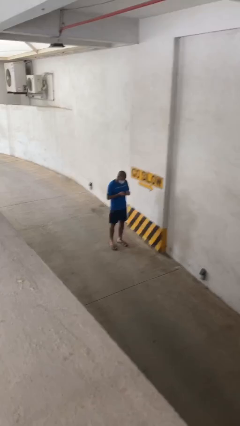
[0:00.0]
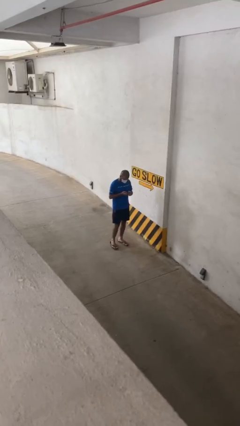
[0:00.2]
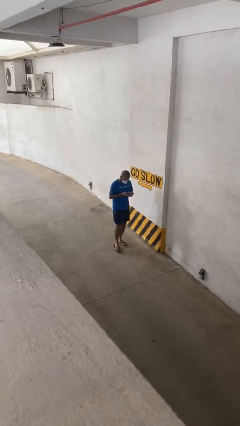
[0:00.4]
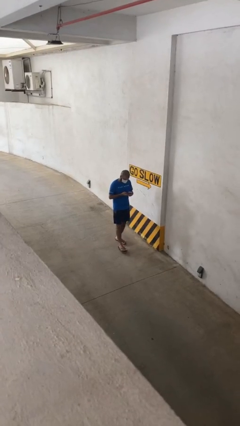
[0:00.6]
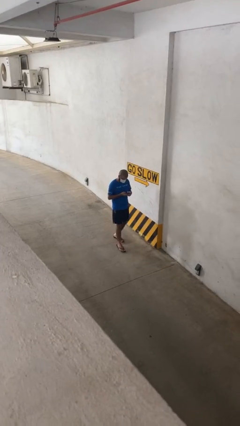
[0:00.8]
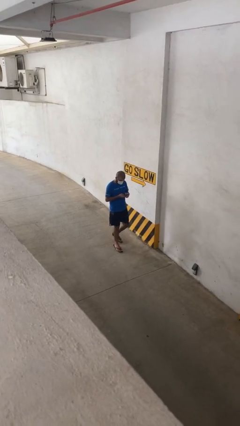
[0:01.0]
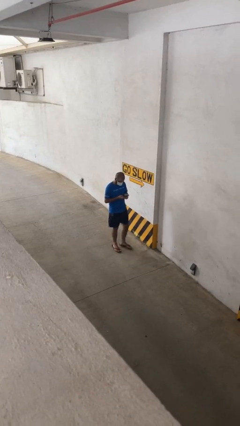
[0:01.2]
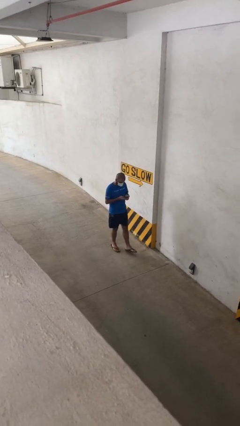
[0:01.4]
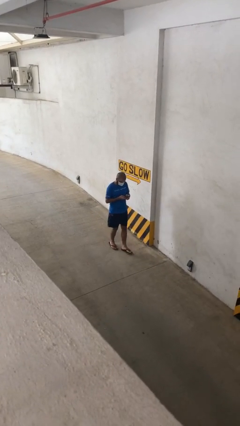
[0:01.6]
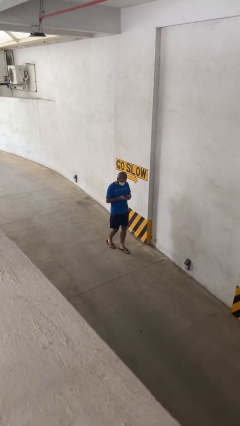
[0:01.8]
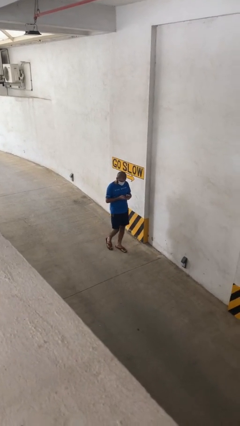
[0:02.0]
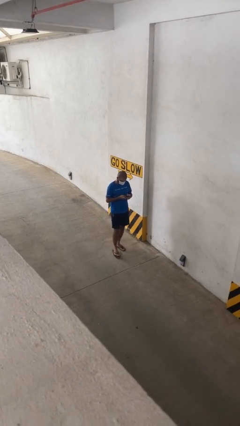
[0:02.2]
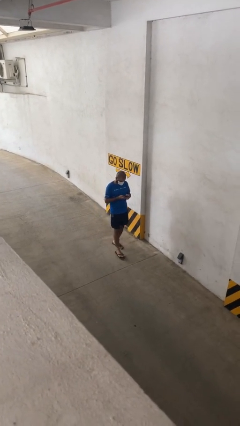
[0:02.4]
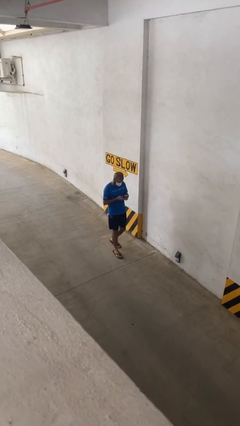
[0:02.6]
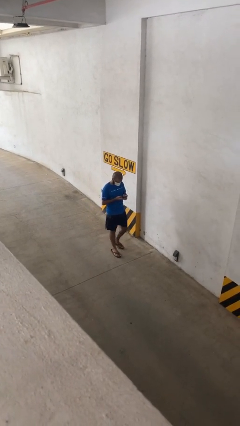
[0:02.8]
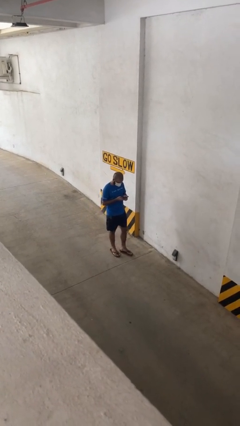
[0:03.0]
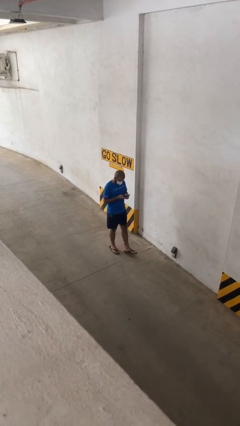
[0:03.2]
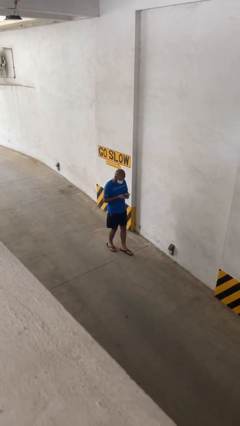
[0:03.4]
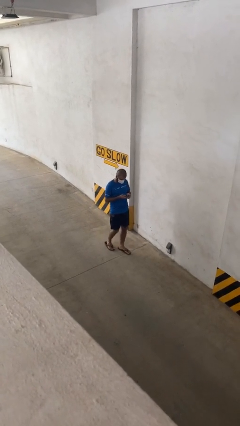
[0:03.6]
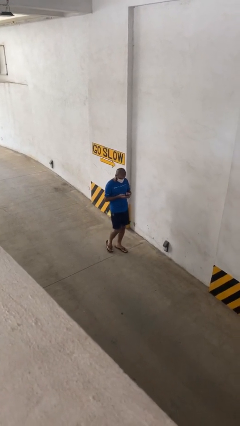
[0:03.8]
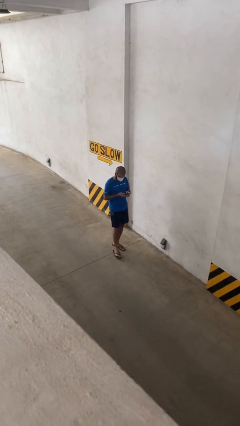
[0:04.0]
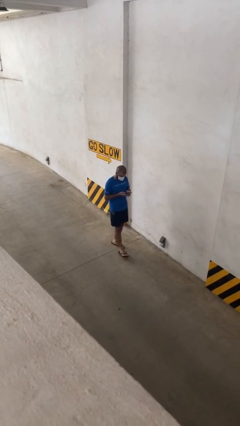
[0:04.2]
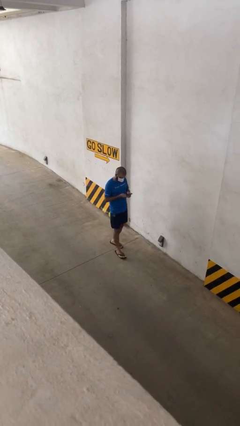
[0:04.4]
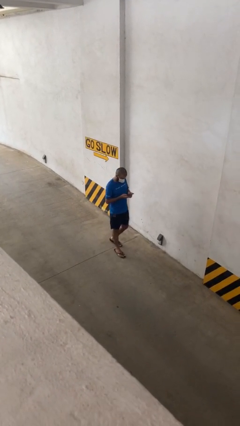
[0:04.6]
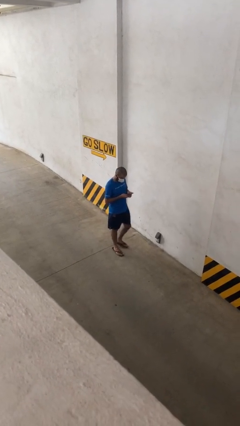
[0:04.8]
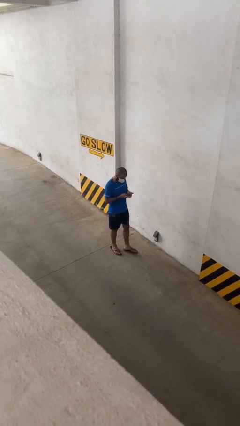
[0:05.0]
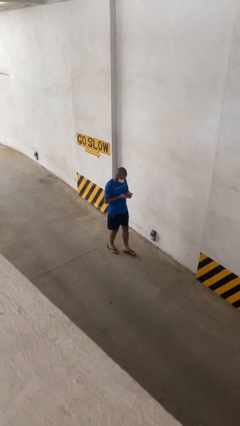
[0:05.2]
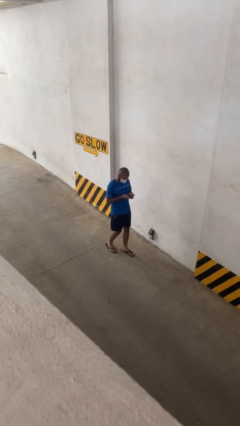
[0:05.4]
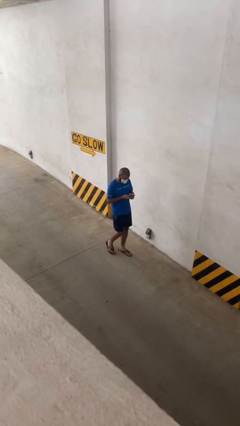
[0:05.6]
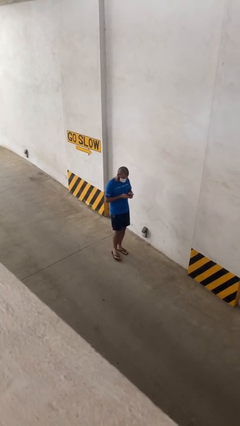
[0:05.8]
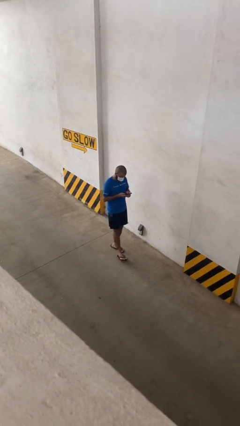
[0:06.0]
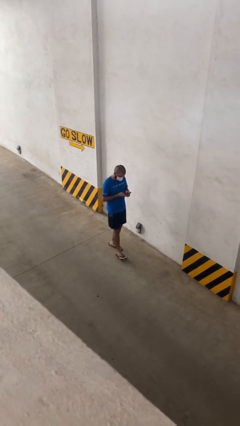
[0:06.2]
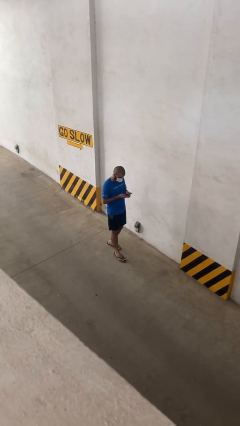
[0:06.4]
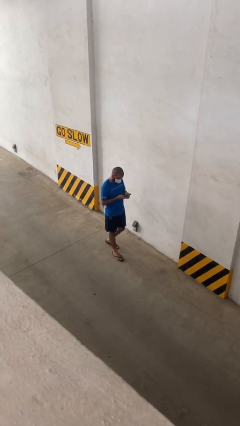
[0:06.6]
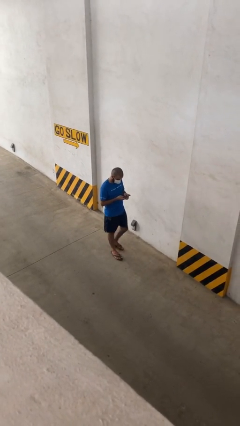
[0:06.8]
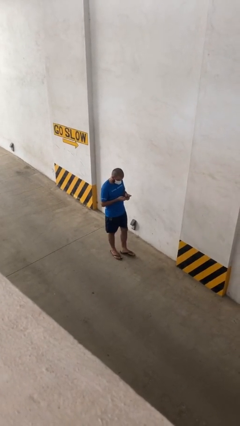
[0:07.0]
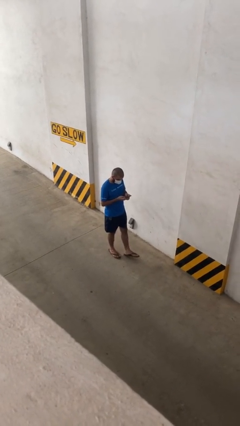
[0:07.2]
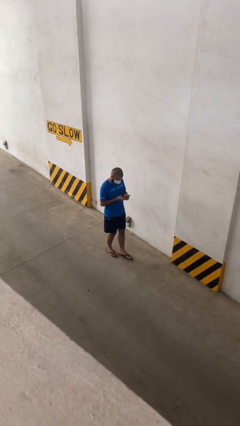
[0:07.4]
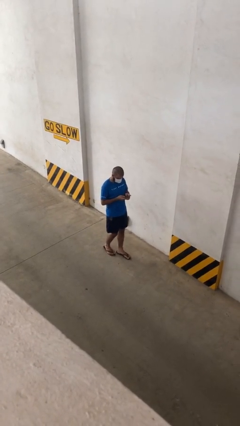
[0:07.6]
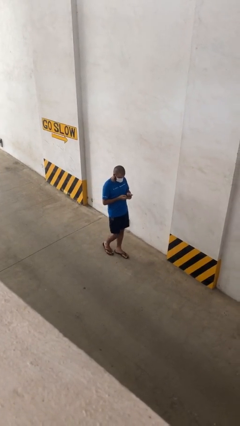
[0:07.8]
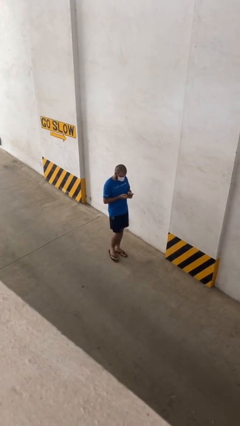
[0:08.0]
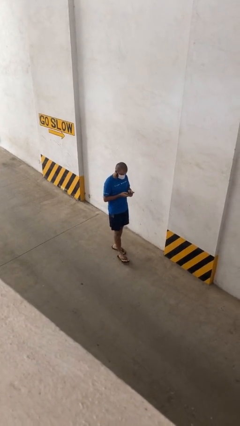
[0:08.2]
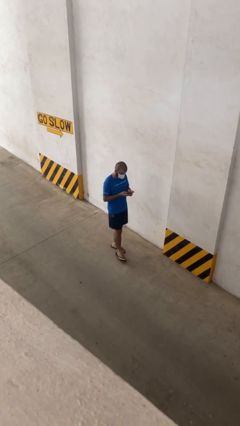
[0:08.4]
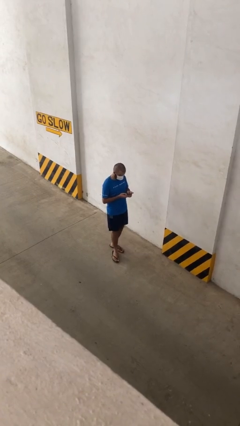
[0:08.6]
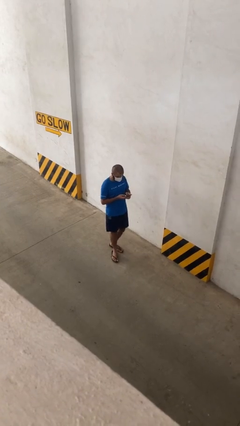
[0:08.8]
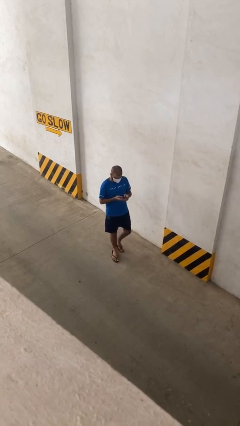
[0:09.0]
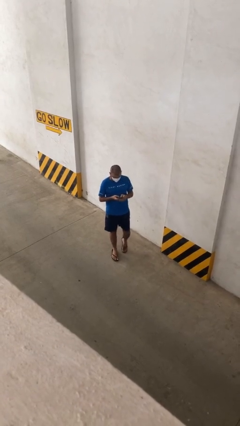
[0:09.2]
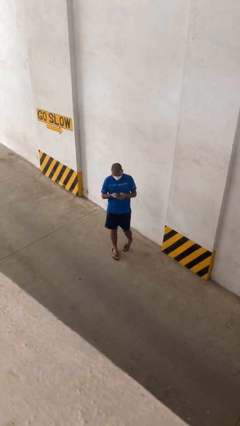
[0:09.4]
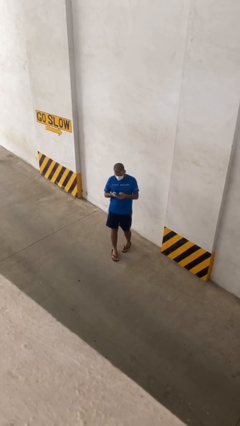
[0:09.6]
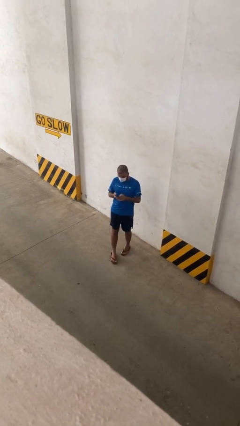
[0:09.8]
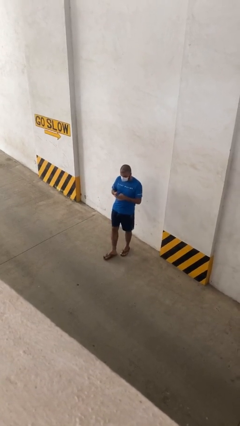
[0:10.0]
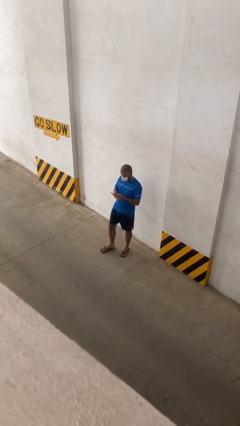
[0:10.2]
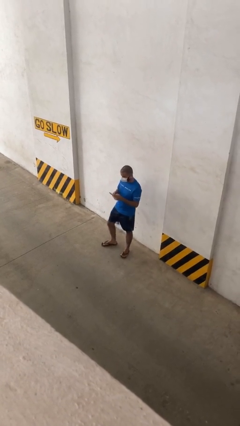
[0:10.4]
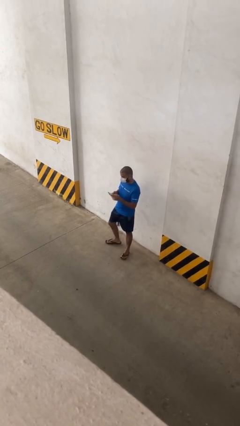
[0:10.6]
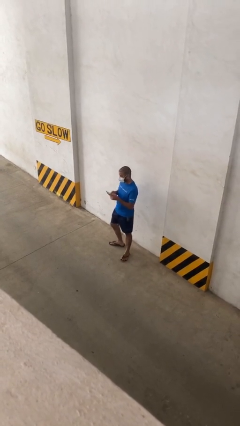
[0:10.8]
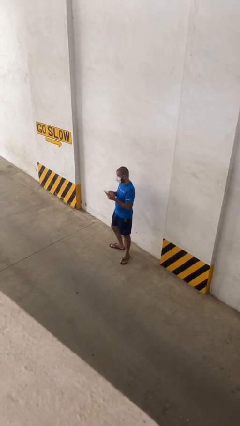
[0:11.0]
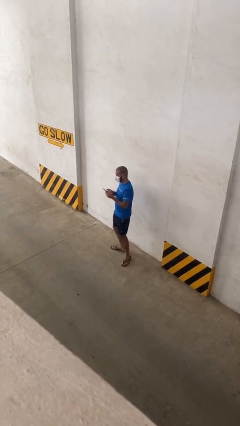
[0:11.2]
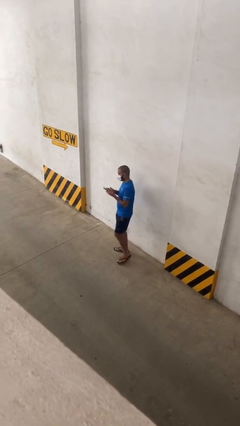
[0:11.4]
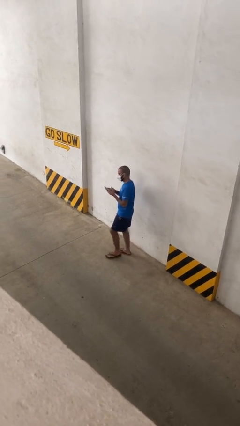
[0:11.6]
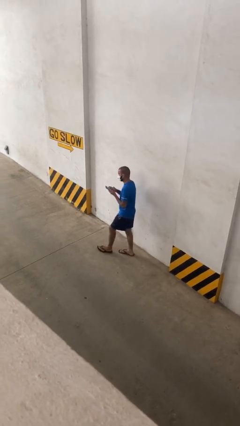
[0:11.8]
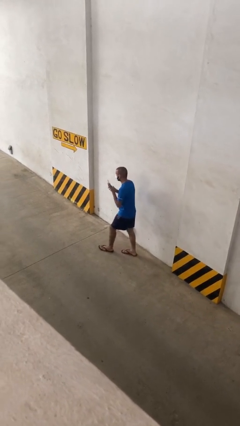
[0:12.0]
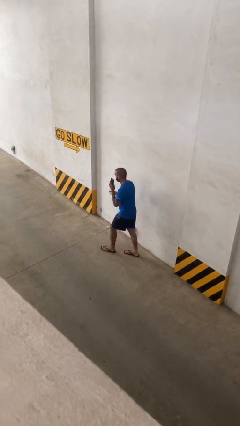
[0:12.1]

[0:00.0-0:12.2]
person texts on phone

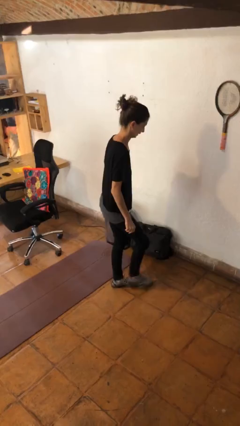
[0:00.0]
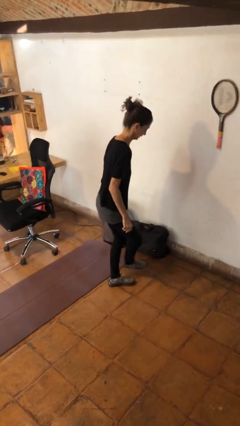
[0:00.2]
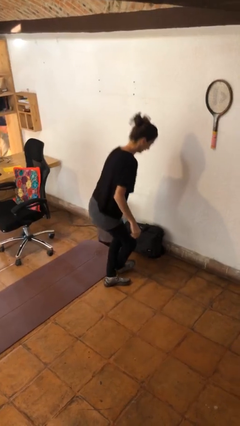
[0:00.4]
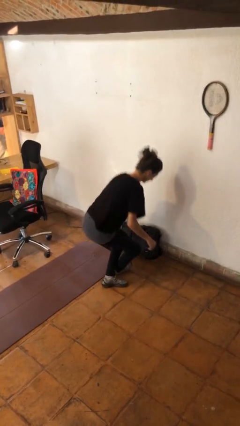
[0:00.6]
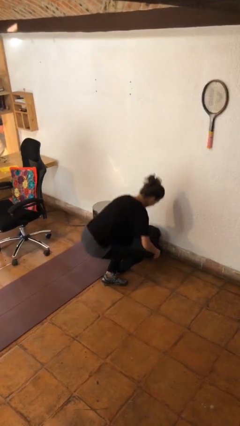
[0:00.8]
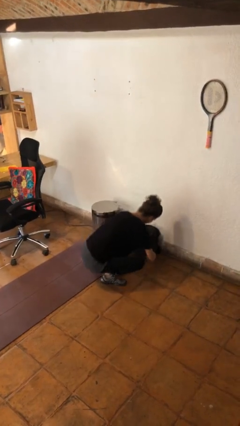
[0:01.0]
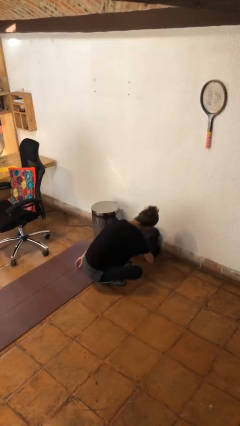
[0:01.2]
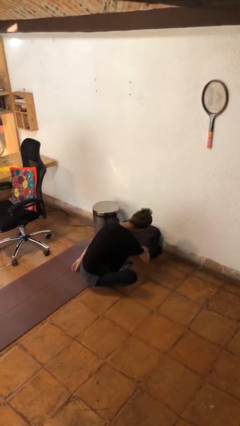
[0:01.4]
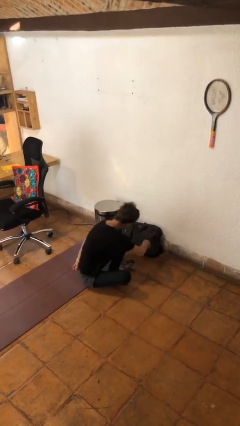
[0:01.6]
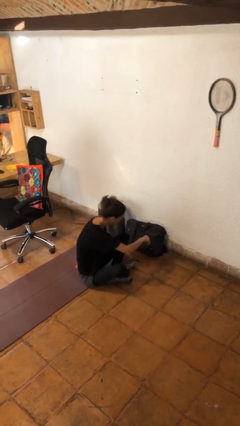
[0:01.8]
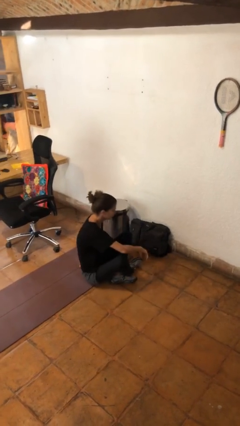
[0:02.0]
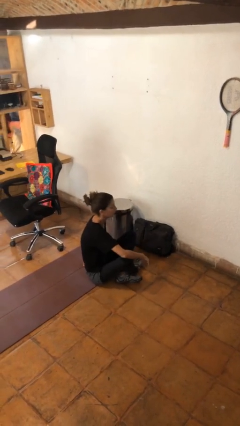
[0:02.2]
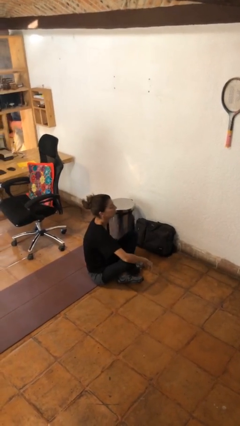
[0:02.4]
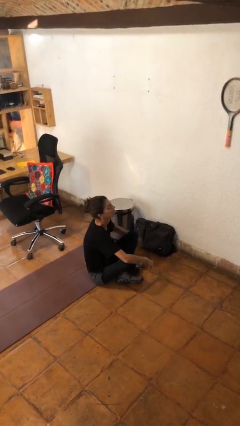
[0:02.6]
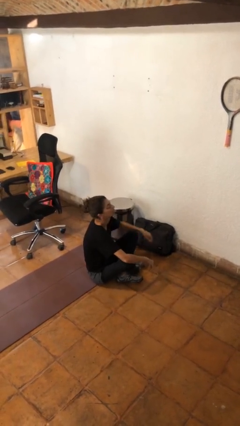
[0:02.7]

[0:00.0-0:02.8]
person sits crisscross

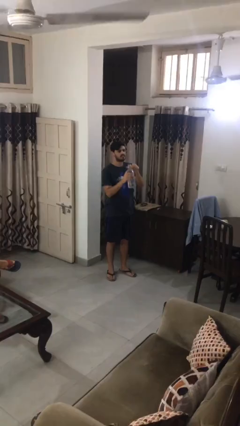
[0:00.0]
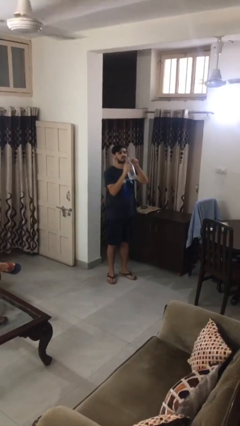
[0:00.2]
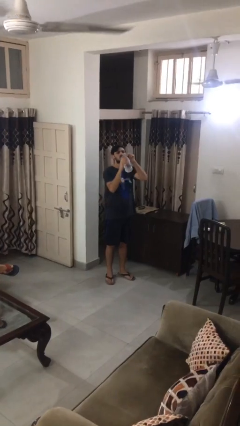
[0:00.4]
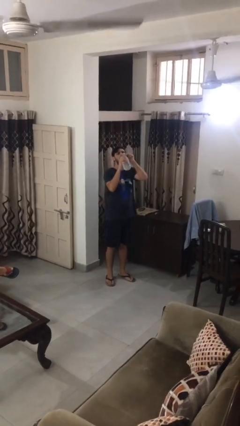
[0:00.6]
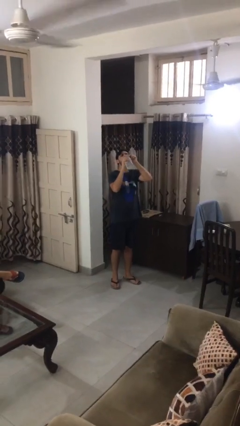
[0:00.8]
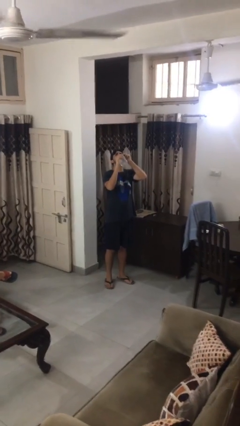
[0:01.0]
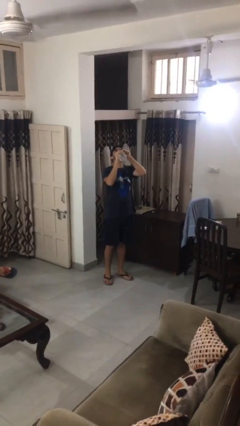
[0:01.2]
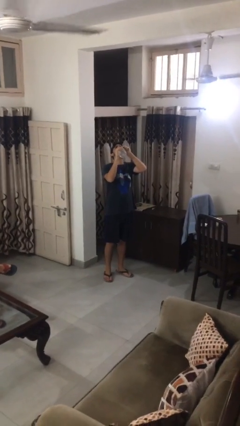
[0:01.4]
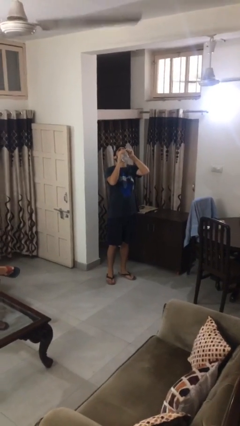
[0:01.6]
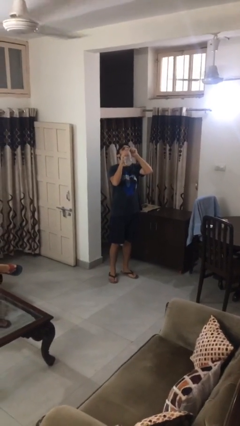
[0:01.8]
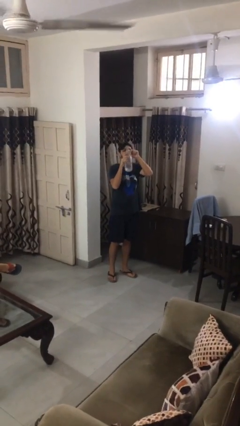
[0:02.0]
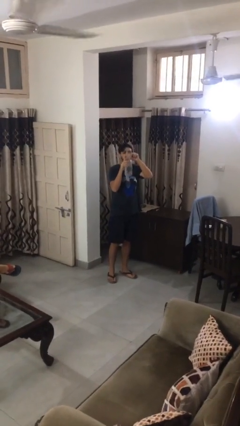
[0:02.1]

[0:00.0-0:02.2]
person drinks from bottle

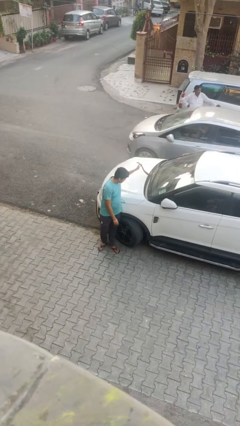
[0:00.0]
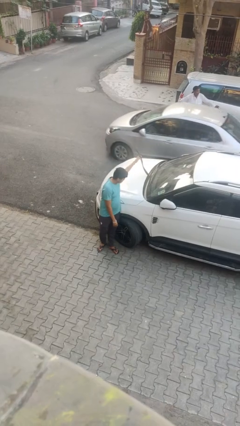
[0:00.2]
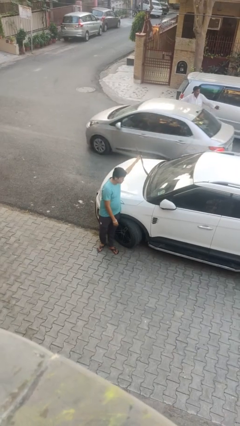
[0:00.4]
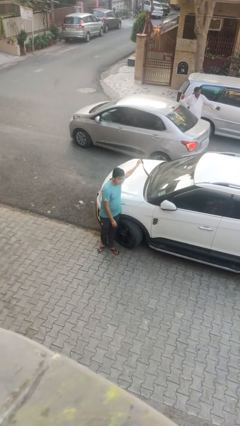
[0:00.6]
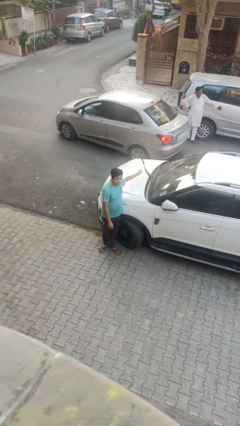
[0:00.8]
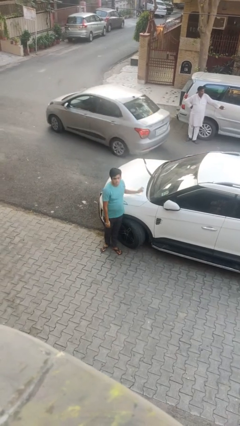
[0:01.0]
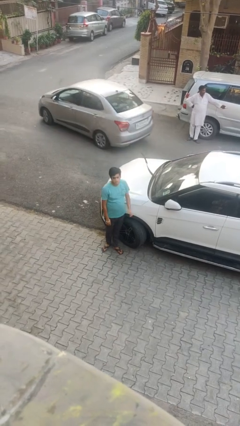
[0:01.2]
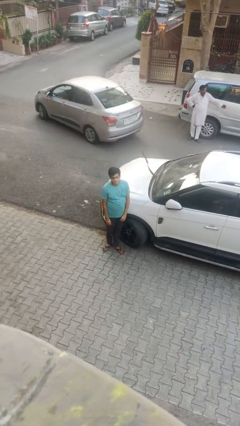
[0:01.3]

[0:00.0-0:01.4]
person flips up car wipers
